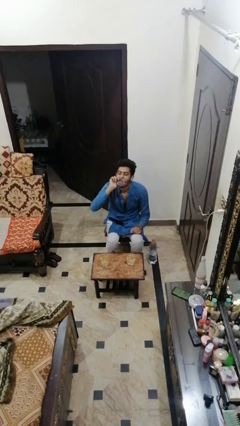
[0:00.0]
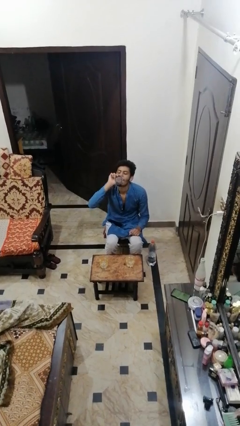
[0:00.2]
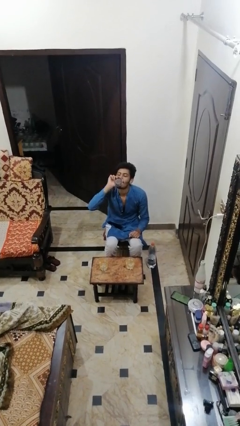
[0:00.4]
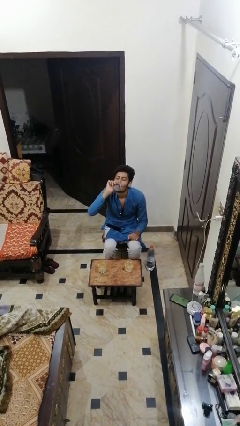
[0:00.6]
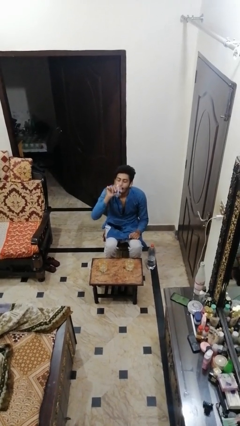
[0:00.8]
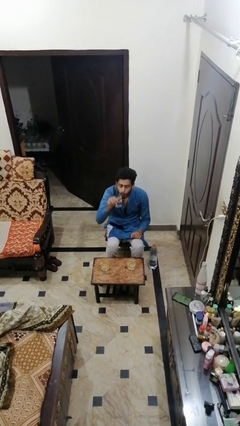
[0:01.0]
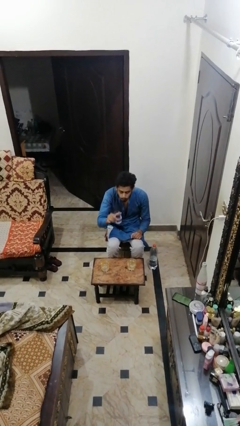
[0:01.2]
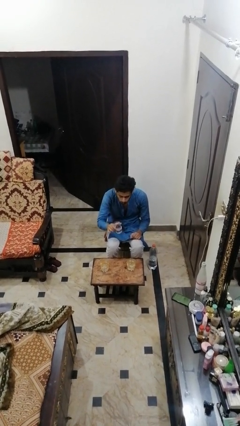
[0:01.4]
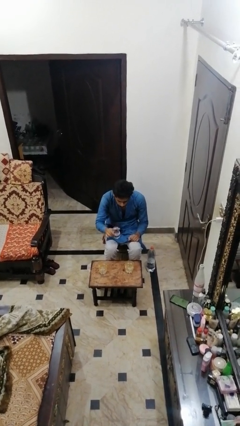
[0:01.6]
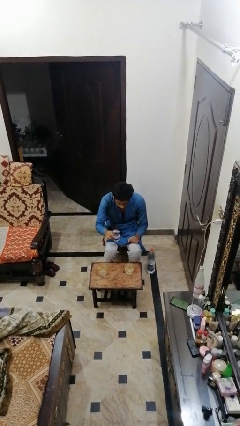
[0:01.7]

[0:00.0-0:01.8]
person drinks from shotglass

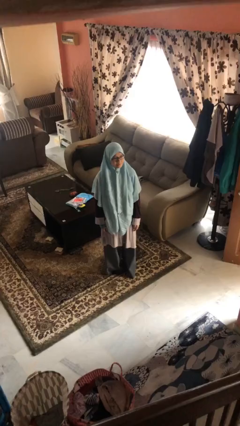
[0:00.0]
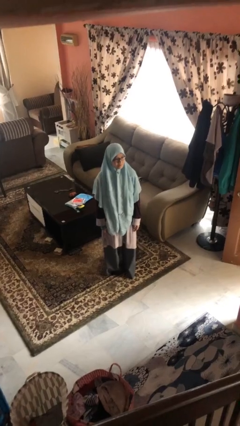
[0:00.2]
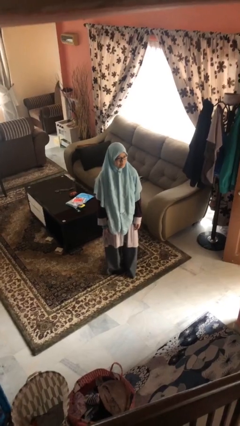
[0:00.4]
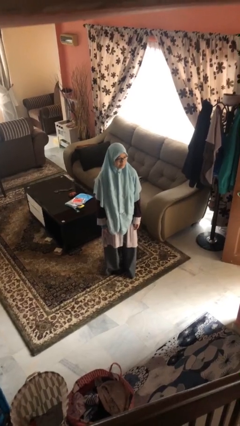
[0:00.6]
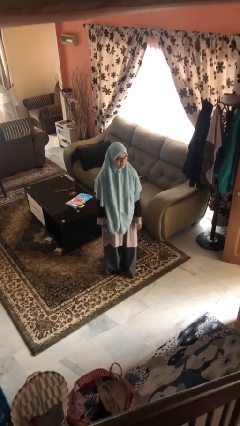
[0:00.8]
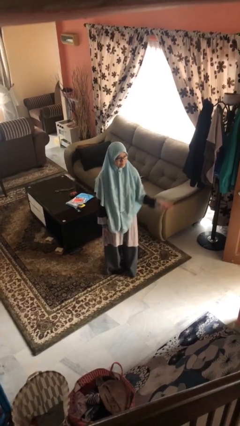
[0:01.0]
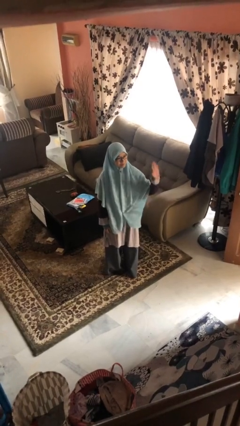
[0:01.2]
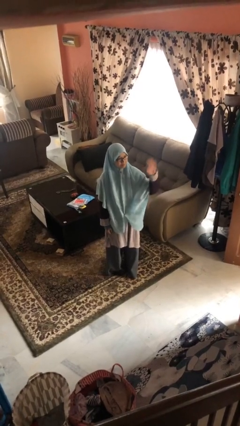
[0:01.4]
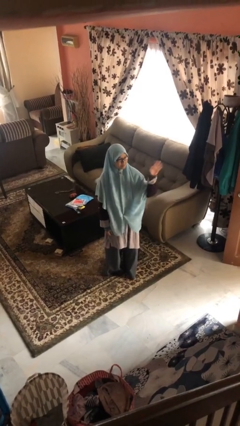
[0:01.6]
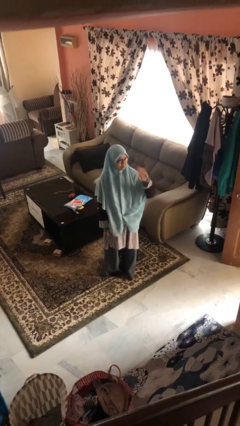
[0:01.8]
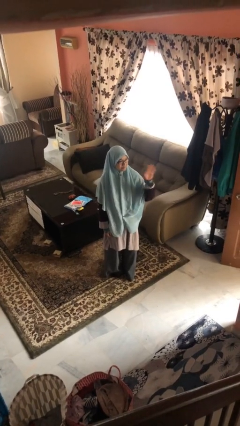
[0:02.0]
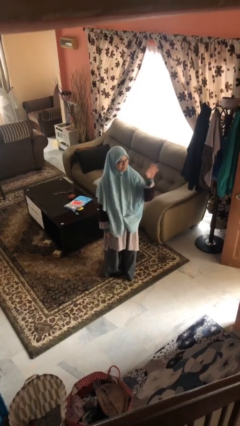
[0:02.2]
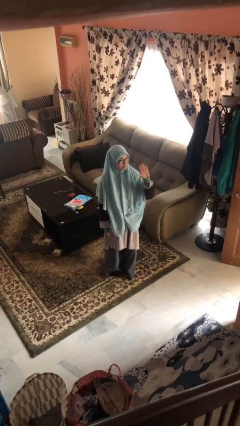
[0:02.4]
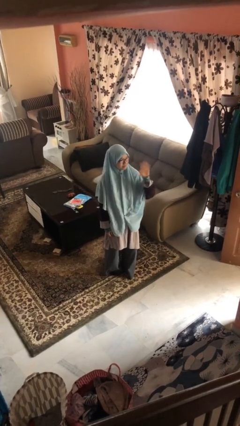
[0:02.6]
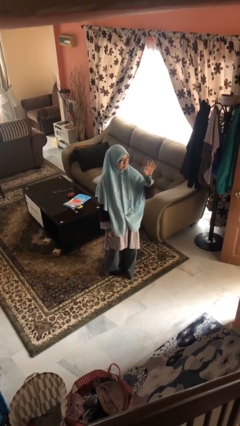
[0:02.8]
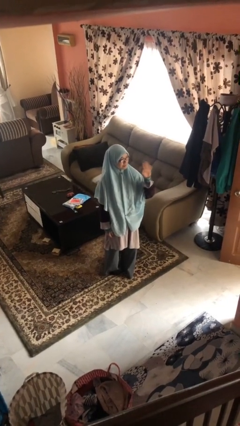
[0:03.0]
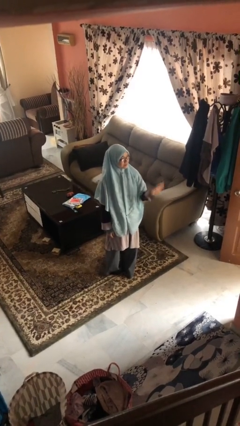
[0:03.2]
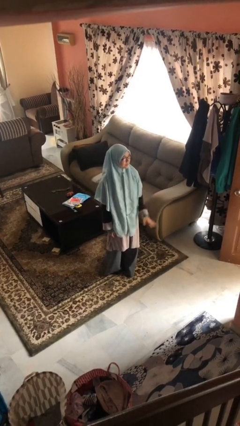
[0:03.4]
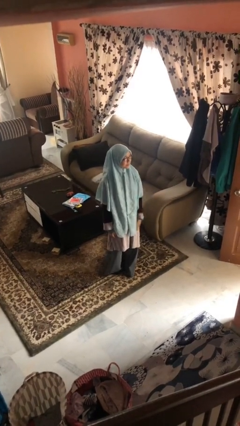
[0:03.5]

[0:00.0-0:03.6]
person waves at person

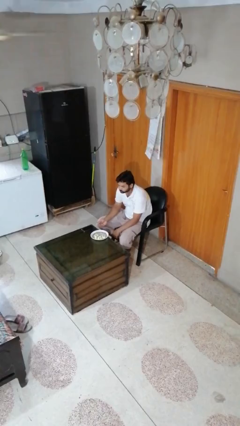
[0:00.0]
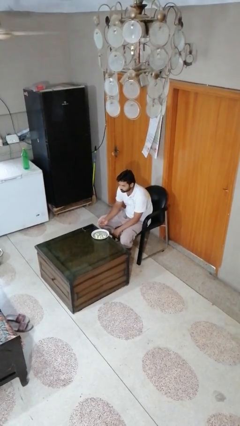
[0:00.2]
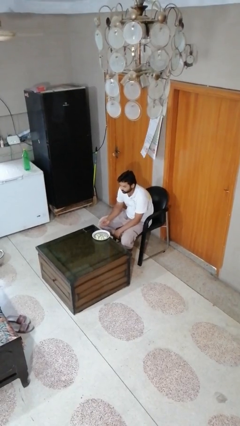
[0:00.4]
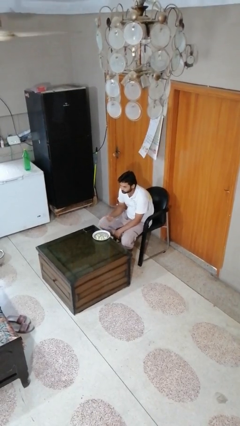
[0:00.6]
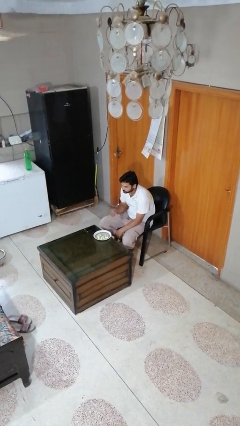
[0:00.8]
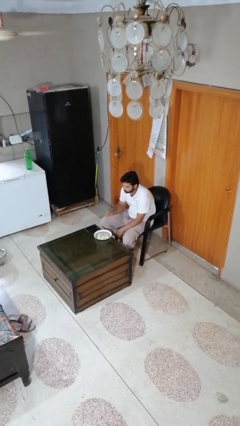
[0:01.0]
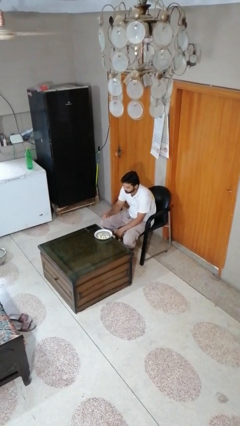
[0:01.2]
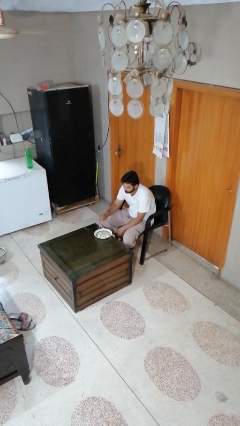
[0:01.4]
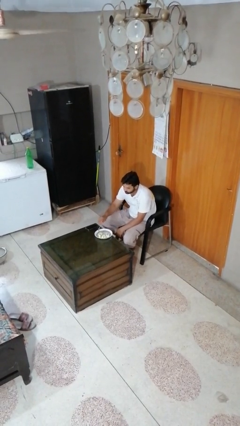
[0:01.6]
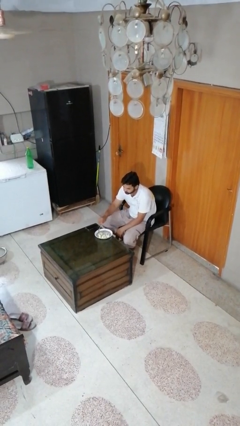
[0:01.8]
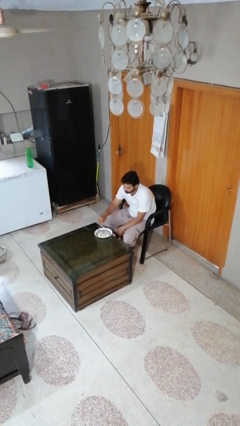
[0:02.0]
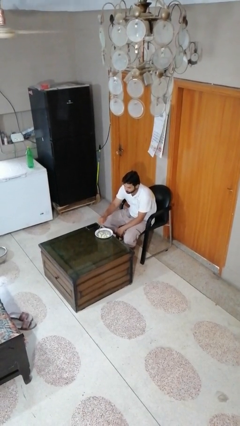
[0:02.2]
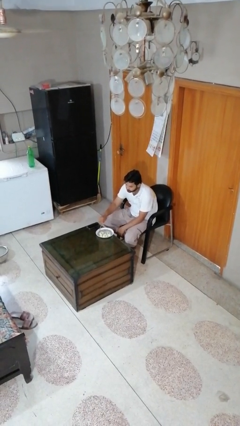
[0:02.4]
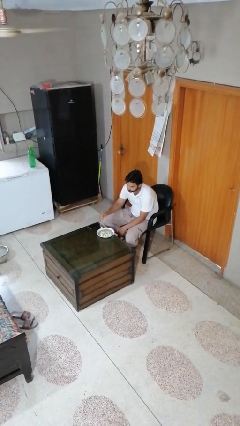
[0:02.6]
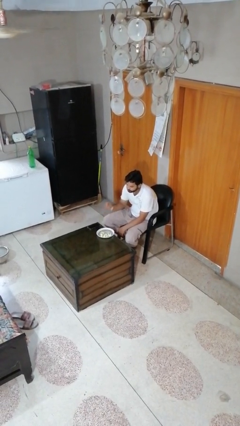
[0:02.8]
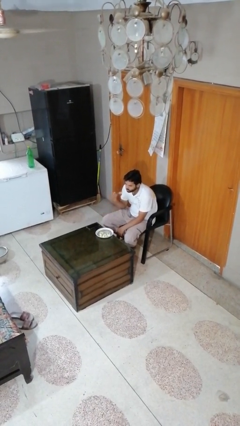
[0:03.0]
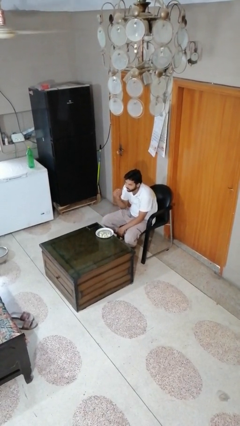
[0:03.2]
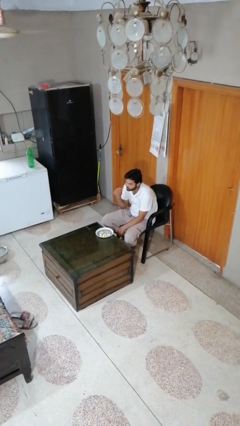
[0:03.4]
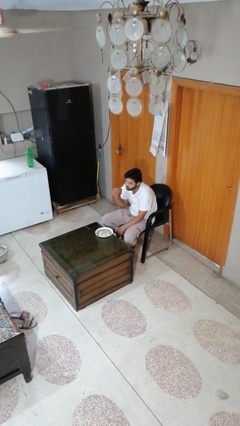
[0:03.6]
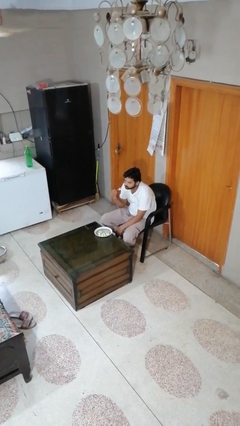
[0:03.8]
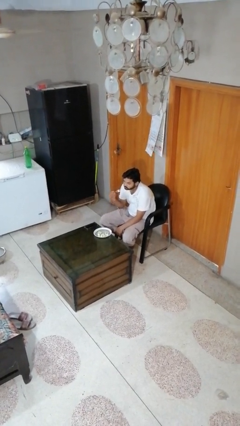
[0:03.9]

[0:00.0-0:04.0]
person eats with utensil

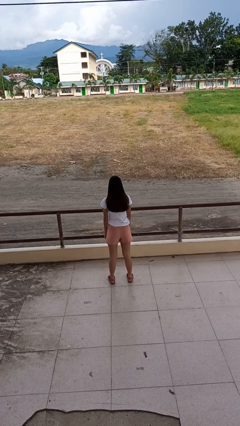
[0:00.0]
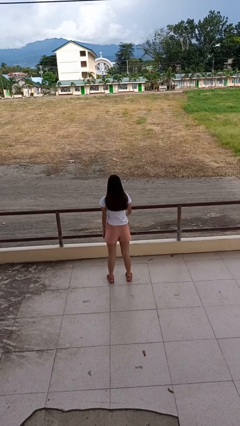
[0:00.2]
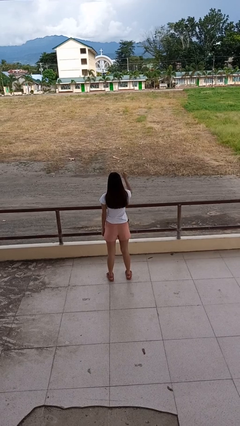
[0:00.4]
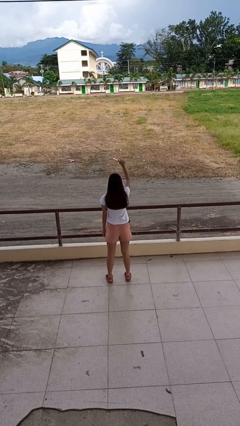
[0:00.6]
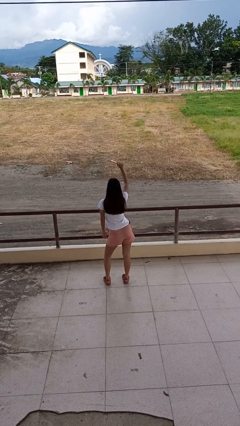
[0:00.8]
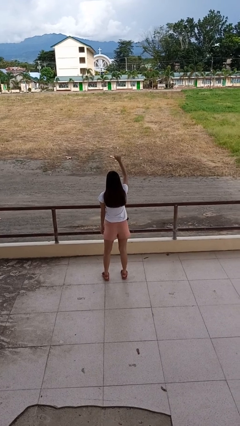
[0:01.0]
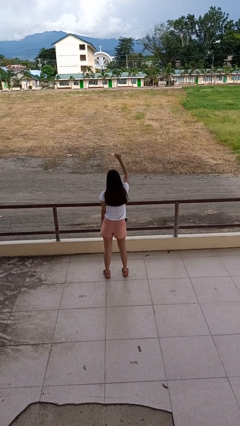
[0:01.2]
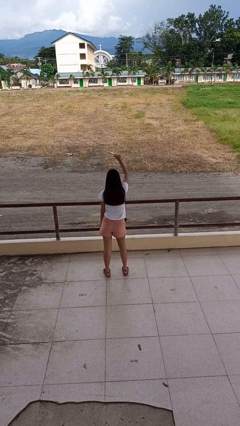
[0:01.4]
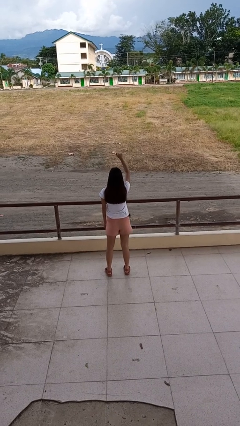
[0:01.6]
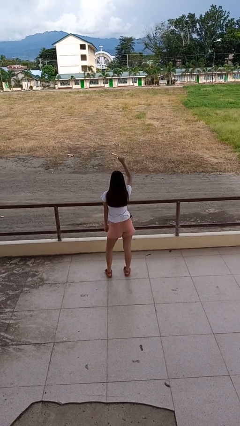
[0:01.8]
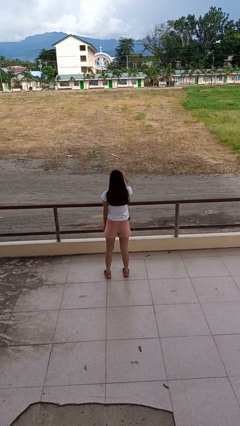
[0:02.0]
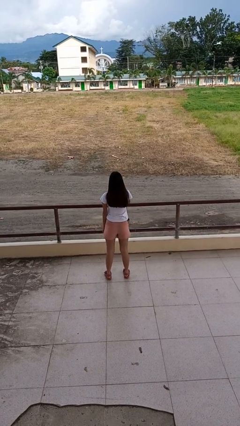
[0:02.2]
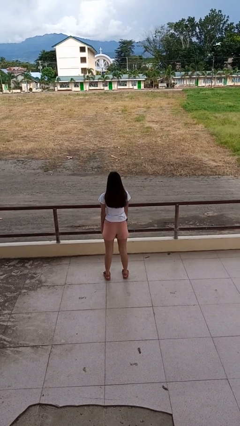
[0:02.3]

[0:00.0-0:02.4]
person dances in place

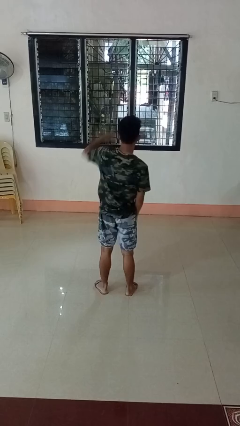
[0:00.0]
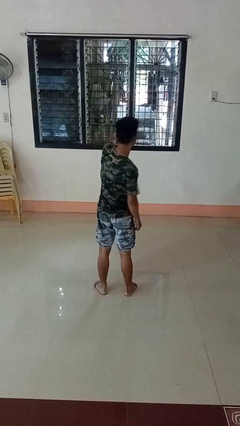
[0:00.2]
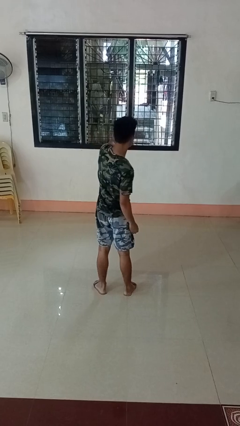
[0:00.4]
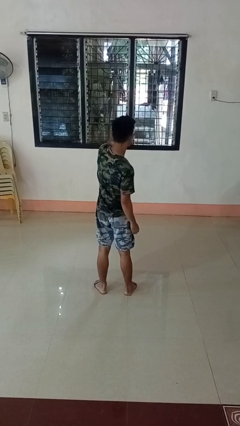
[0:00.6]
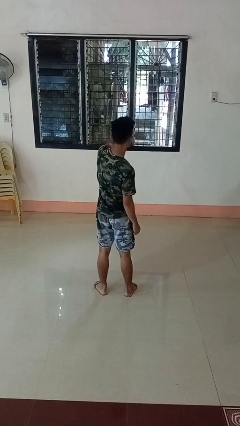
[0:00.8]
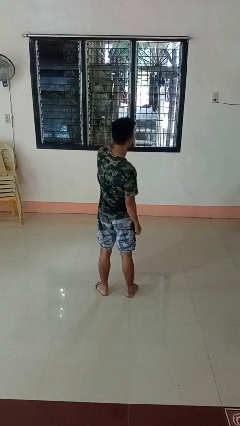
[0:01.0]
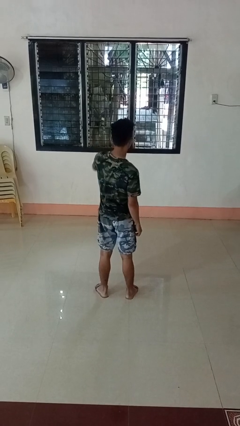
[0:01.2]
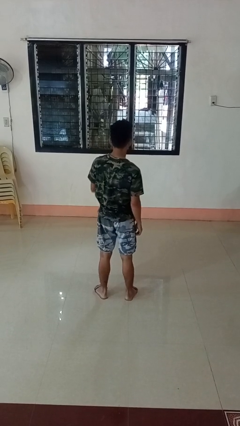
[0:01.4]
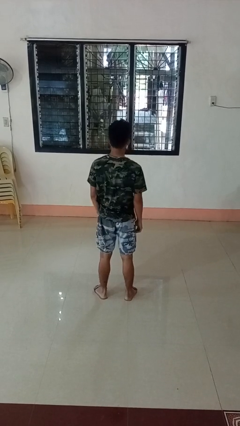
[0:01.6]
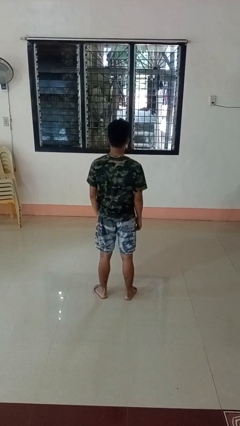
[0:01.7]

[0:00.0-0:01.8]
person punches

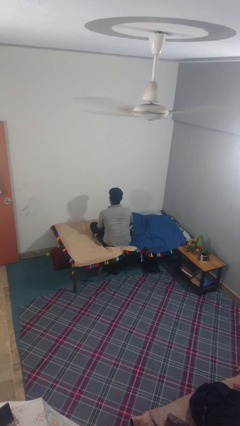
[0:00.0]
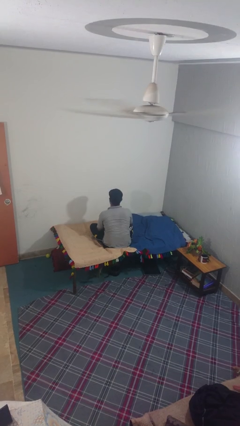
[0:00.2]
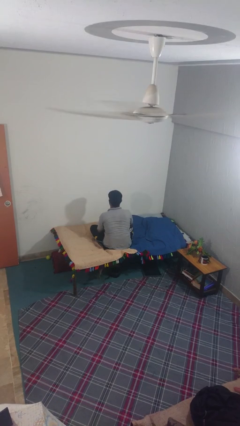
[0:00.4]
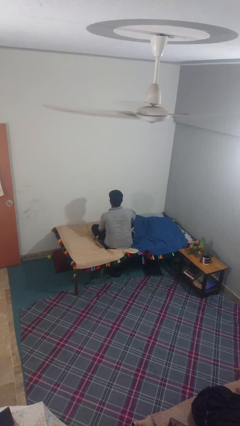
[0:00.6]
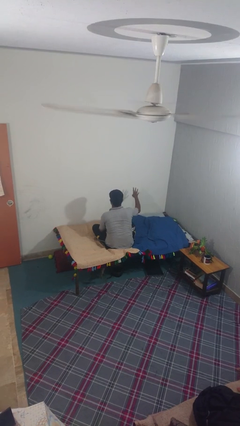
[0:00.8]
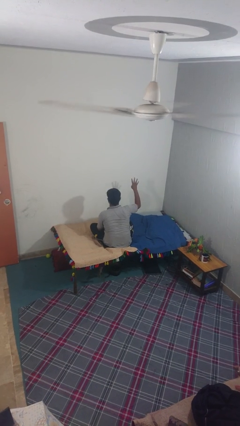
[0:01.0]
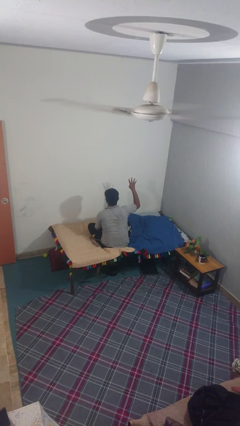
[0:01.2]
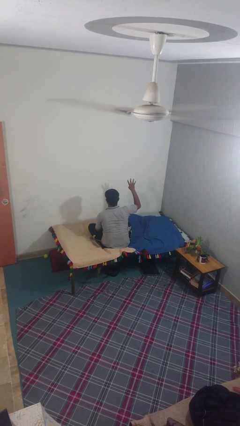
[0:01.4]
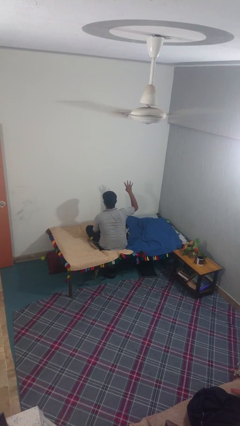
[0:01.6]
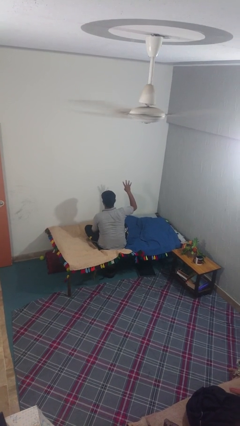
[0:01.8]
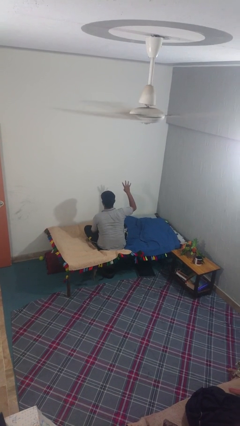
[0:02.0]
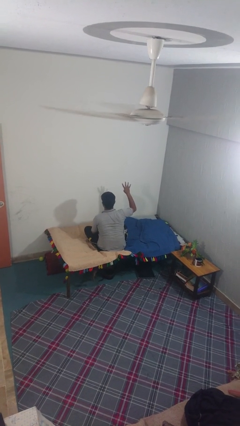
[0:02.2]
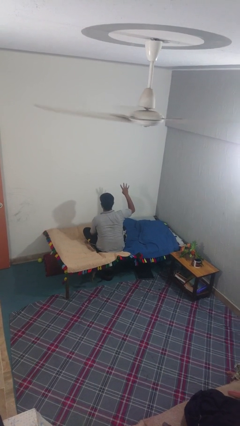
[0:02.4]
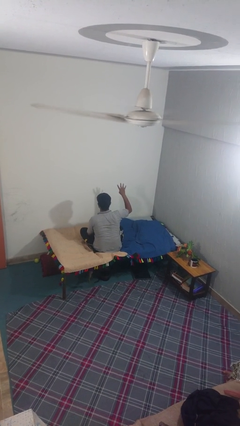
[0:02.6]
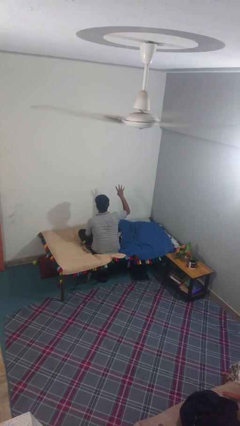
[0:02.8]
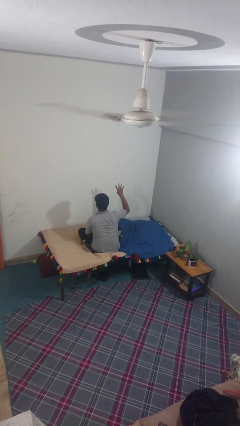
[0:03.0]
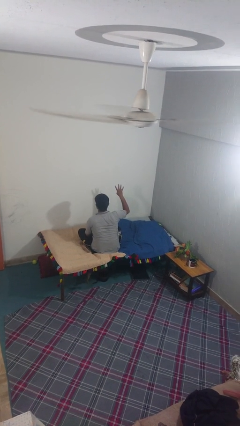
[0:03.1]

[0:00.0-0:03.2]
person gestures number four

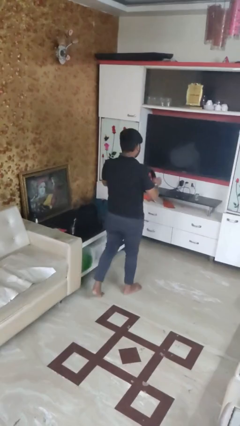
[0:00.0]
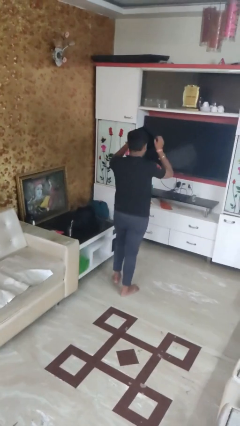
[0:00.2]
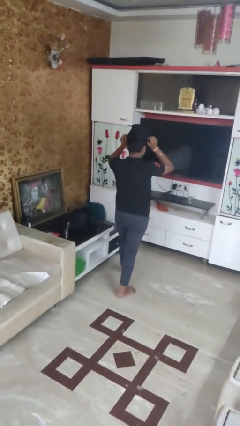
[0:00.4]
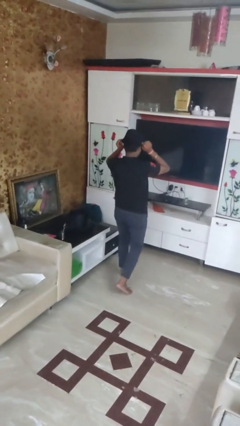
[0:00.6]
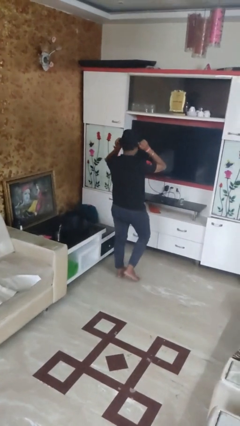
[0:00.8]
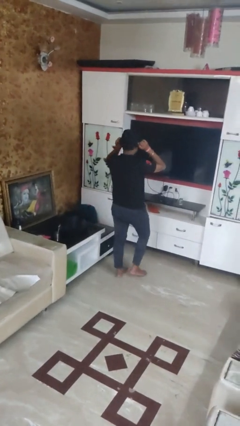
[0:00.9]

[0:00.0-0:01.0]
person puts on hat
